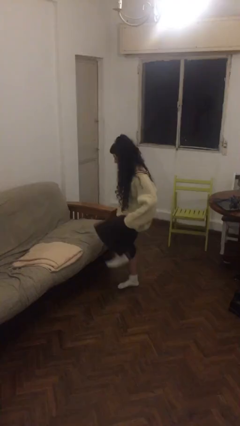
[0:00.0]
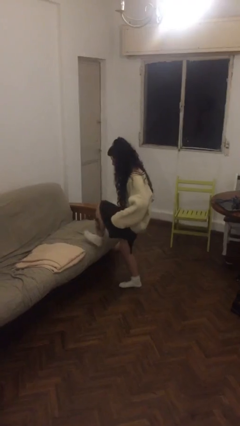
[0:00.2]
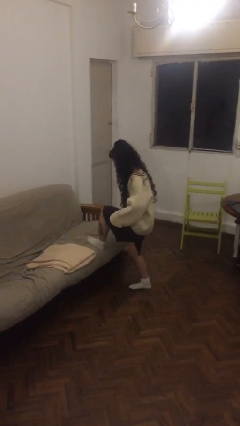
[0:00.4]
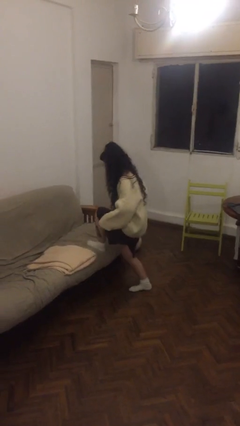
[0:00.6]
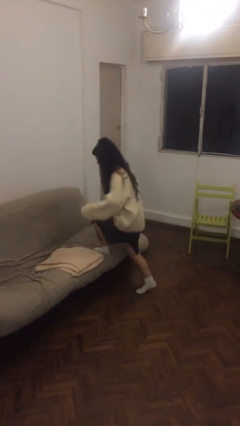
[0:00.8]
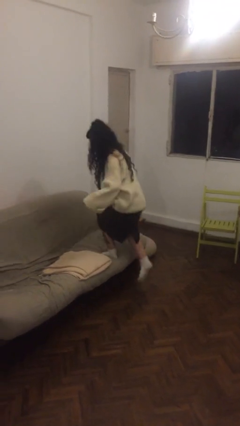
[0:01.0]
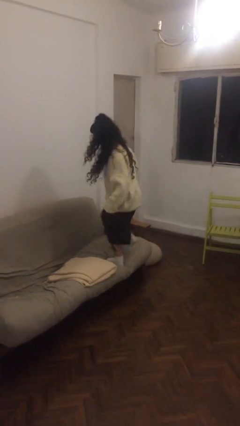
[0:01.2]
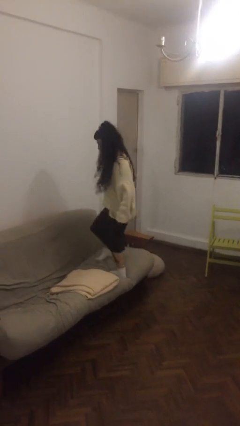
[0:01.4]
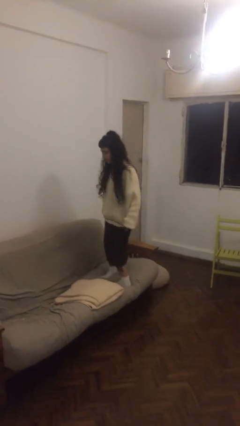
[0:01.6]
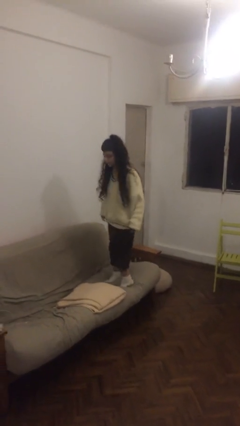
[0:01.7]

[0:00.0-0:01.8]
person climbs on couch

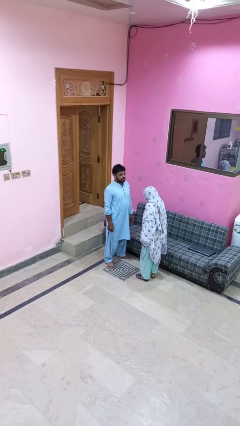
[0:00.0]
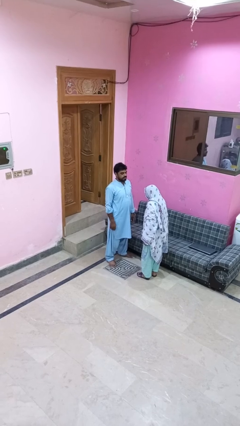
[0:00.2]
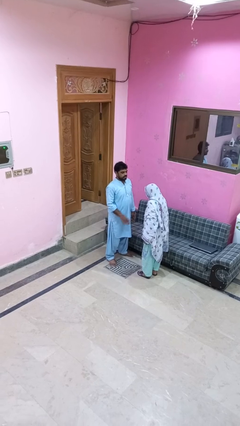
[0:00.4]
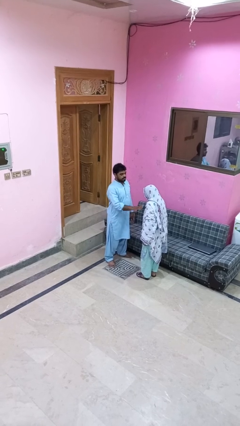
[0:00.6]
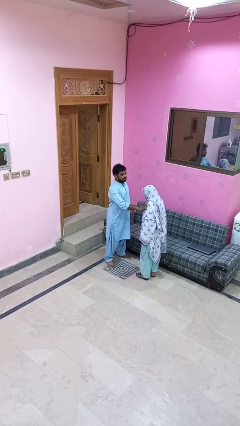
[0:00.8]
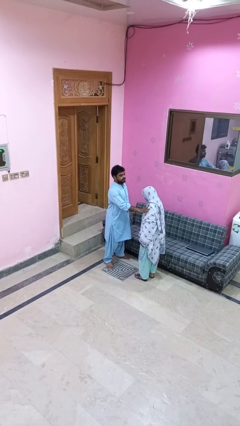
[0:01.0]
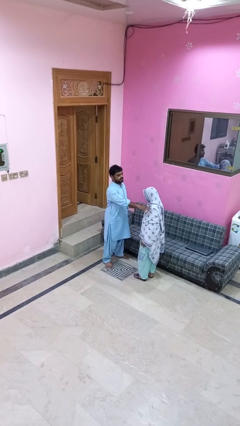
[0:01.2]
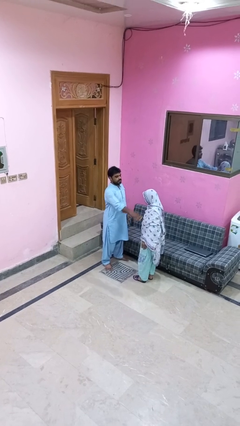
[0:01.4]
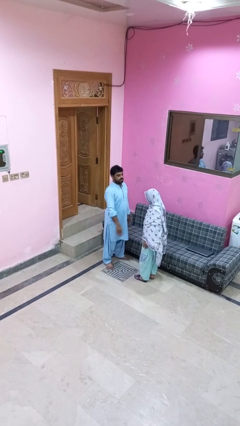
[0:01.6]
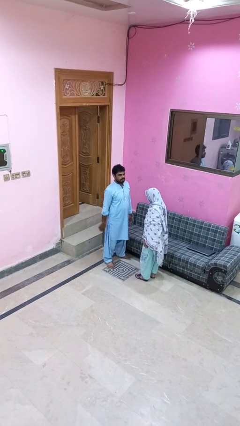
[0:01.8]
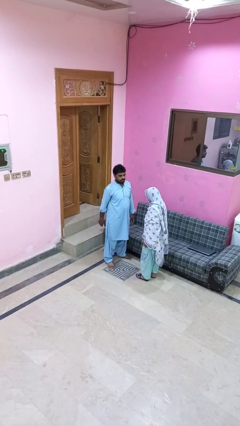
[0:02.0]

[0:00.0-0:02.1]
person shoves person

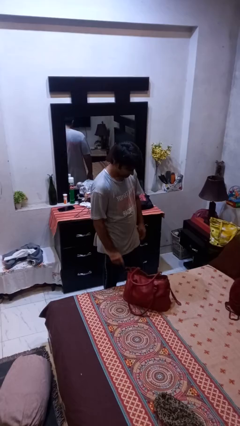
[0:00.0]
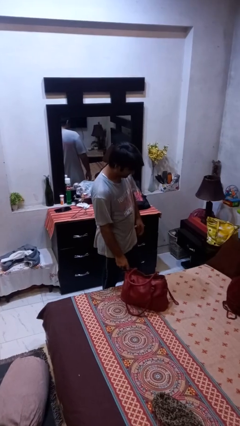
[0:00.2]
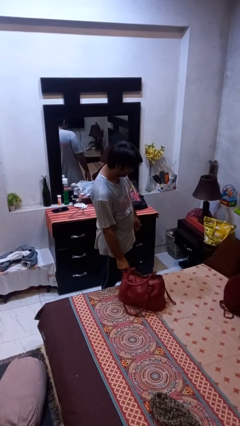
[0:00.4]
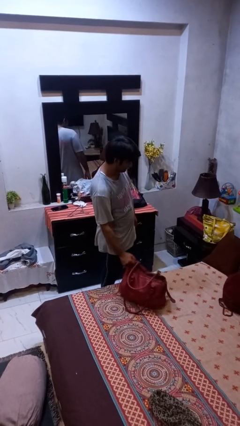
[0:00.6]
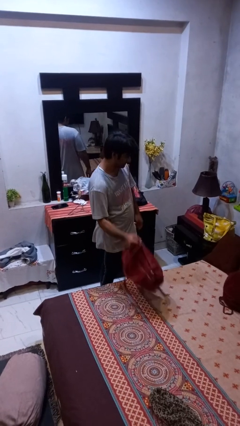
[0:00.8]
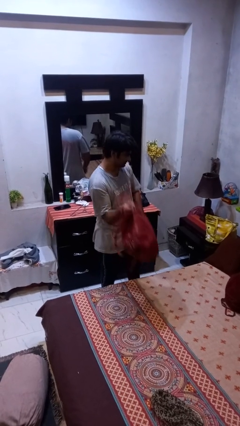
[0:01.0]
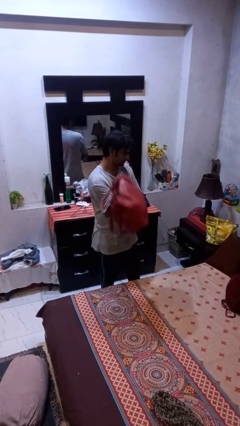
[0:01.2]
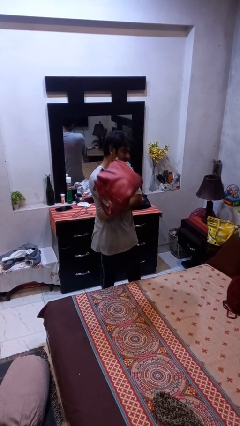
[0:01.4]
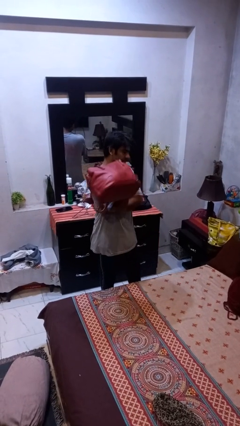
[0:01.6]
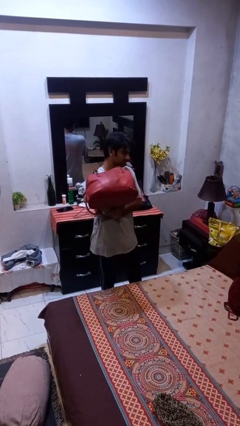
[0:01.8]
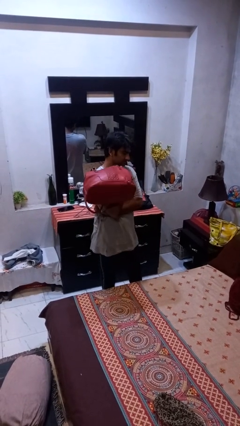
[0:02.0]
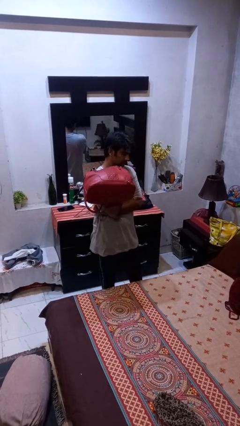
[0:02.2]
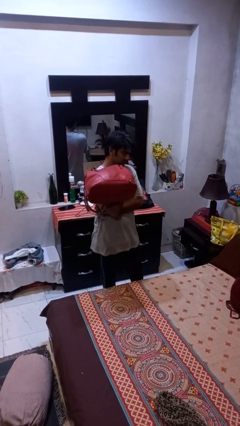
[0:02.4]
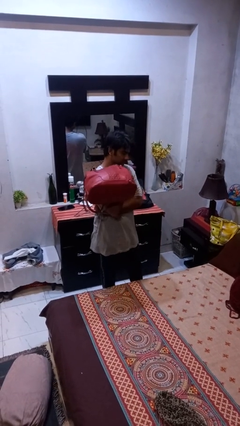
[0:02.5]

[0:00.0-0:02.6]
person picks up object from bed

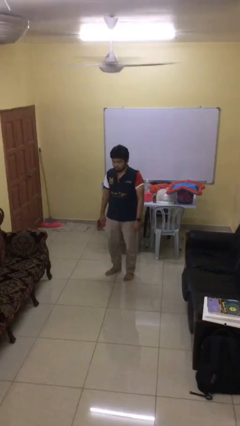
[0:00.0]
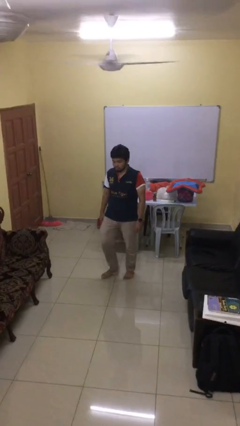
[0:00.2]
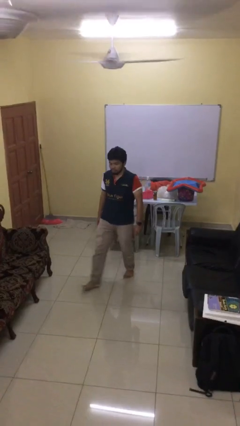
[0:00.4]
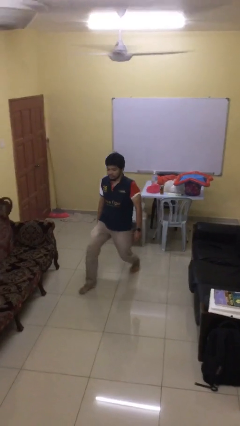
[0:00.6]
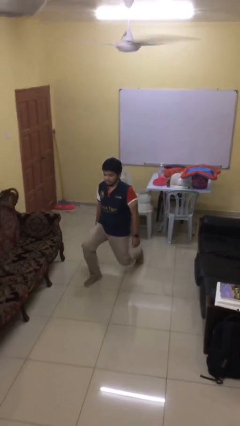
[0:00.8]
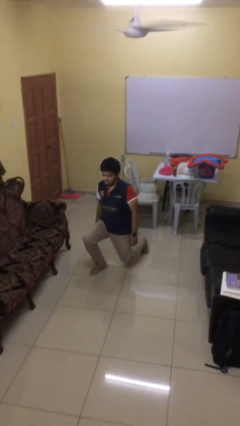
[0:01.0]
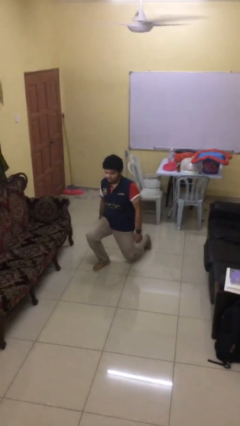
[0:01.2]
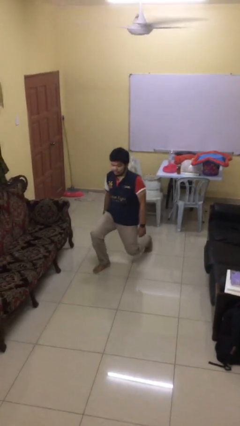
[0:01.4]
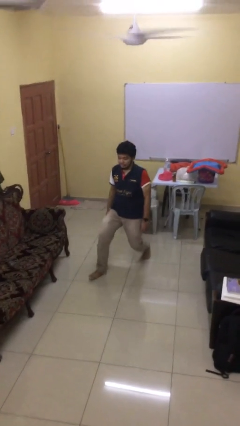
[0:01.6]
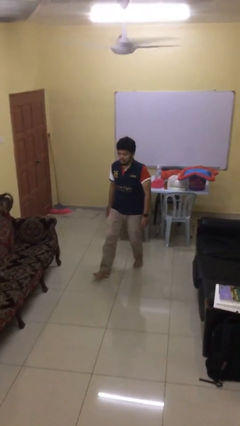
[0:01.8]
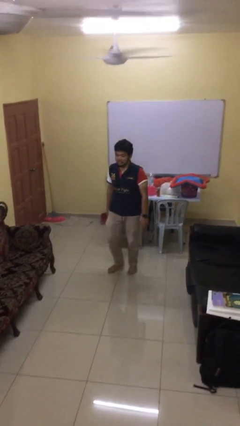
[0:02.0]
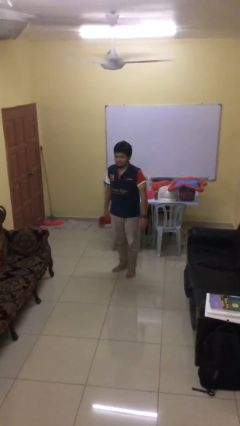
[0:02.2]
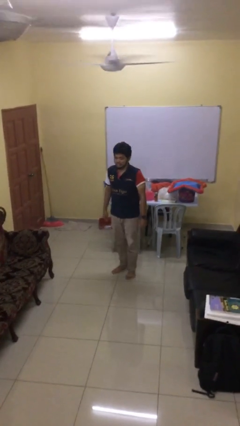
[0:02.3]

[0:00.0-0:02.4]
person exercises with lunges

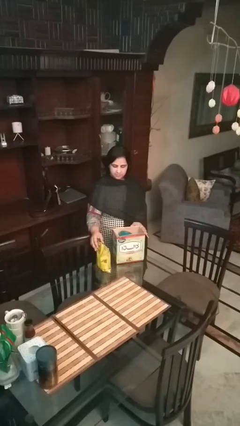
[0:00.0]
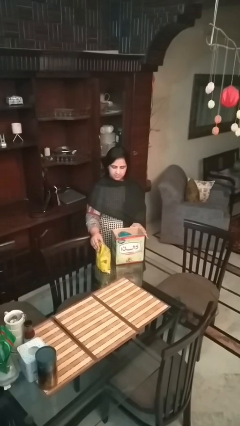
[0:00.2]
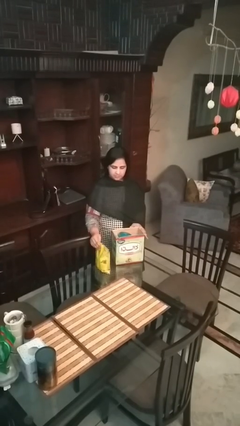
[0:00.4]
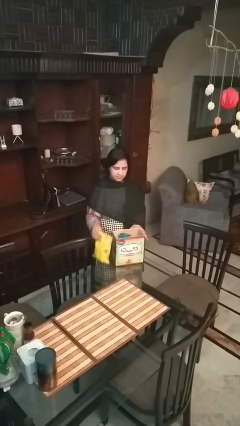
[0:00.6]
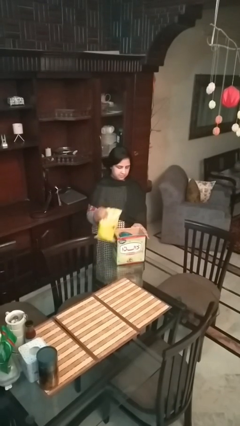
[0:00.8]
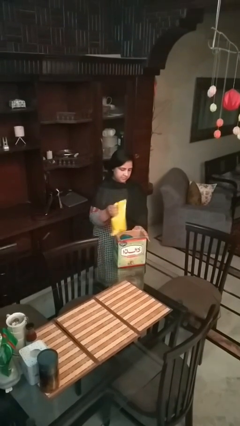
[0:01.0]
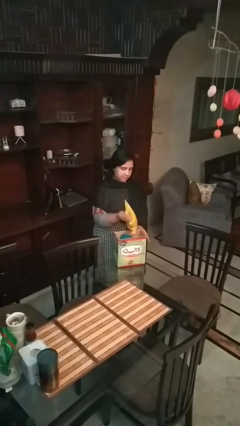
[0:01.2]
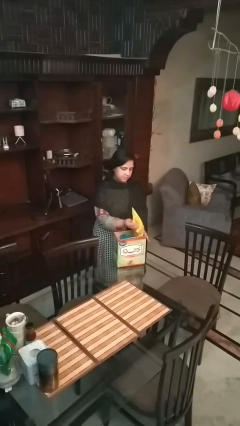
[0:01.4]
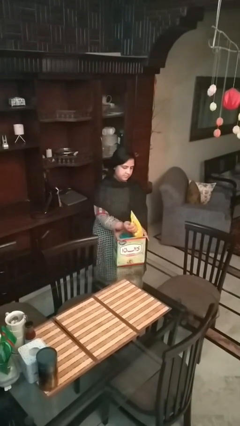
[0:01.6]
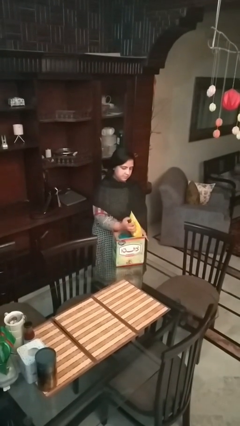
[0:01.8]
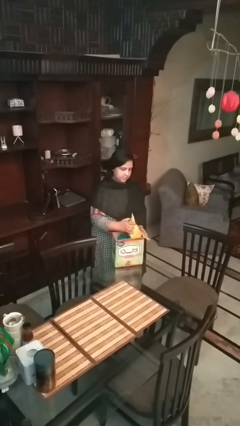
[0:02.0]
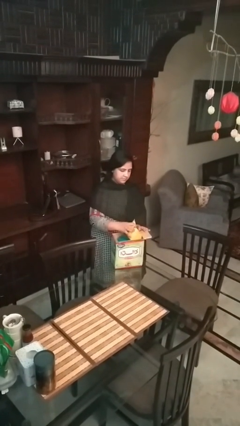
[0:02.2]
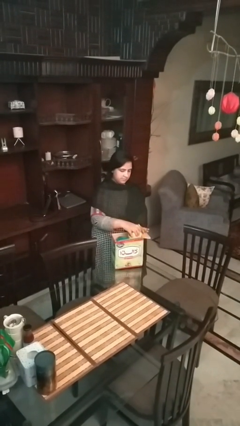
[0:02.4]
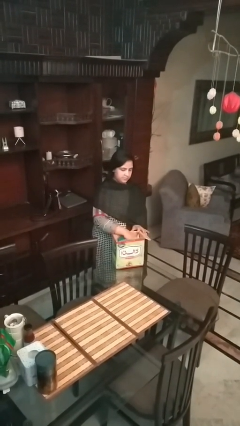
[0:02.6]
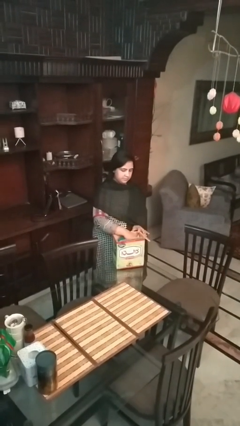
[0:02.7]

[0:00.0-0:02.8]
person puts object into box

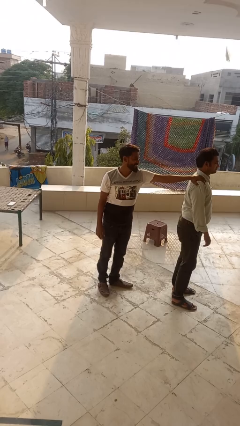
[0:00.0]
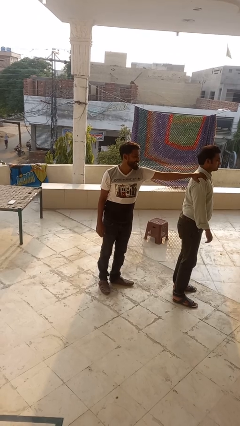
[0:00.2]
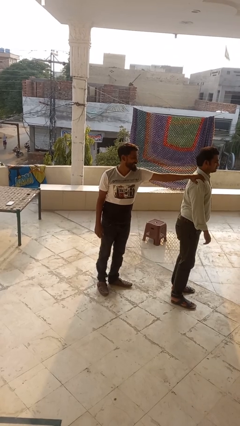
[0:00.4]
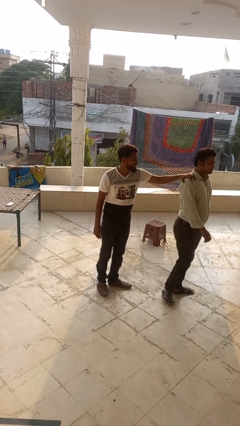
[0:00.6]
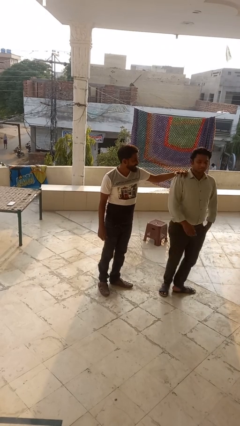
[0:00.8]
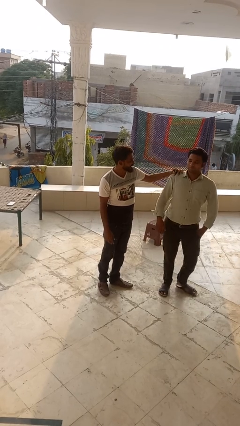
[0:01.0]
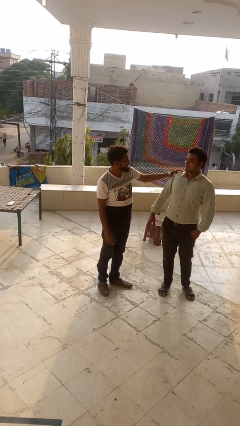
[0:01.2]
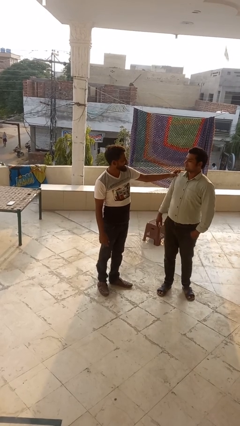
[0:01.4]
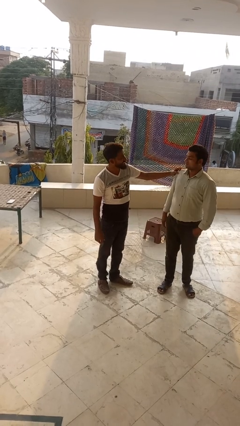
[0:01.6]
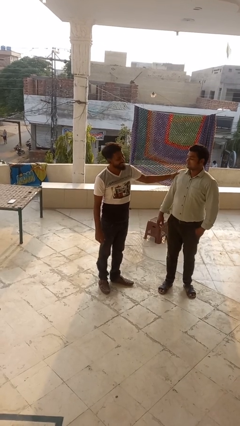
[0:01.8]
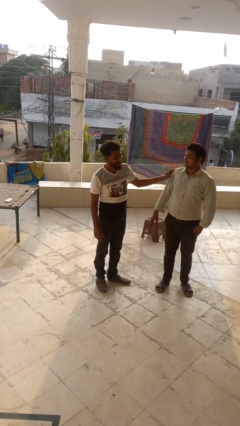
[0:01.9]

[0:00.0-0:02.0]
person spins person around

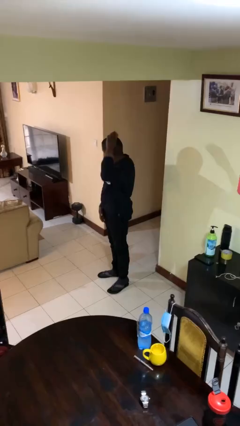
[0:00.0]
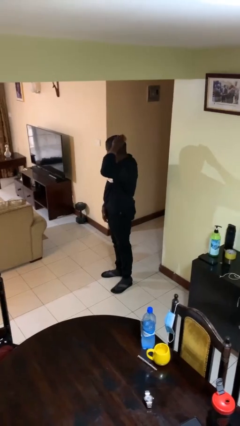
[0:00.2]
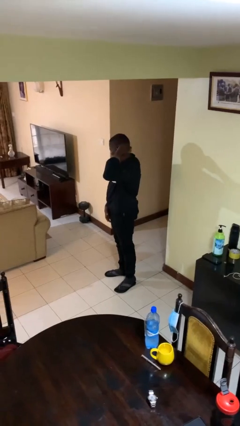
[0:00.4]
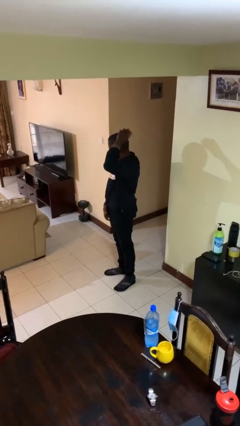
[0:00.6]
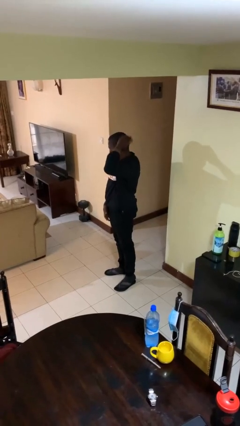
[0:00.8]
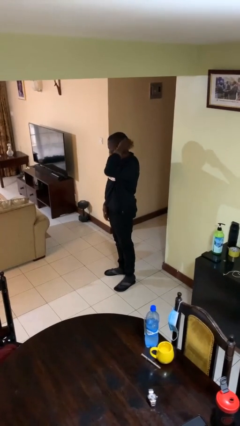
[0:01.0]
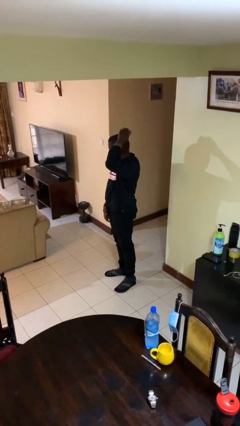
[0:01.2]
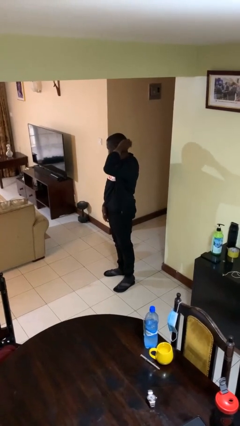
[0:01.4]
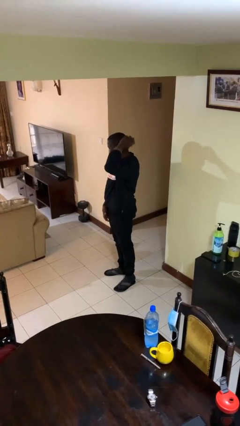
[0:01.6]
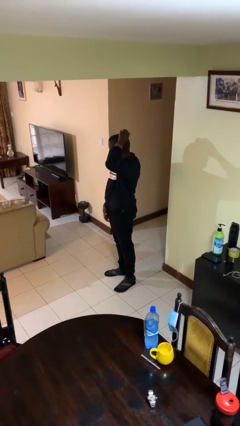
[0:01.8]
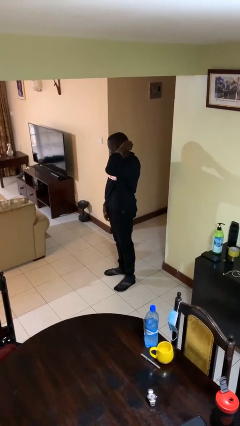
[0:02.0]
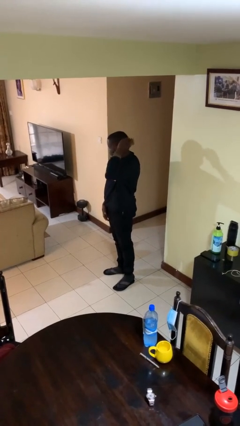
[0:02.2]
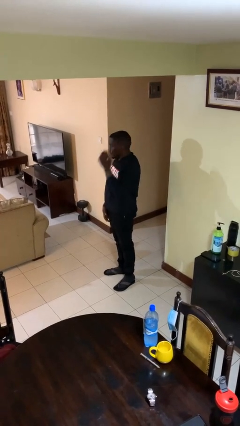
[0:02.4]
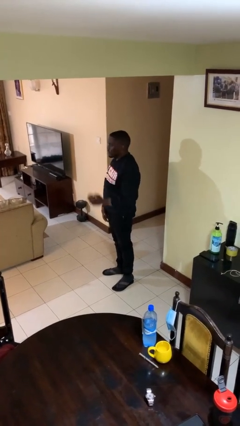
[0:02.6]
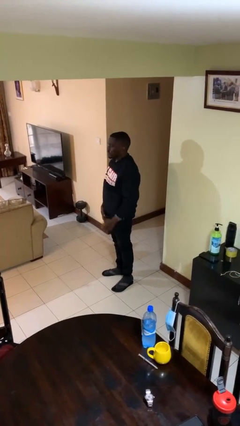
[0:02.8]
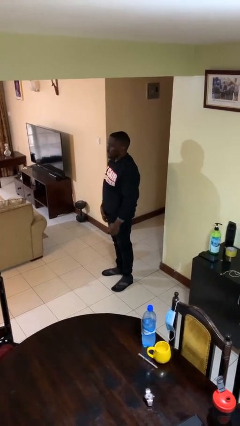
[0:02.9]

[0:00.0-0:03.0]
person brushes hair

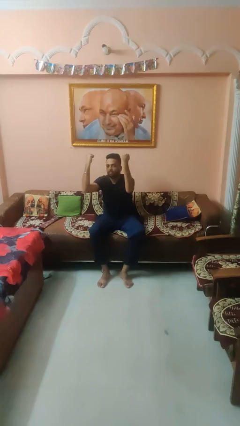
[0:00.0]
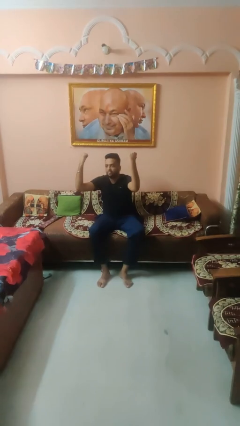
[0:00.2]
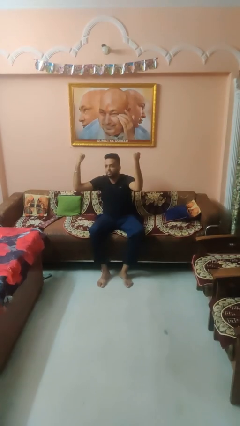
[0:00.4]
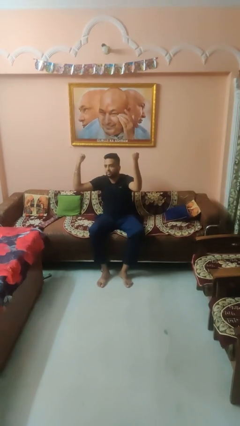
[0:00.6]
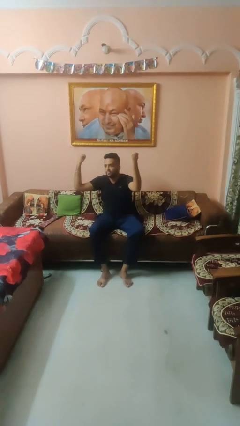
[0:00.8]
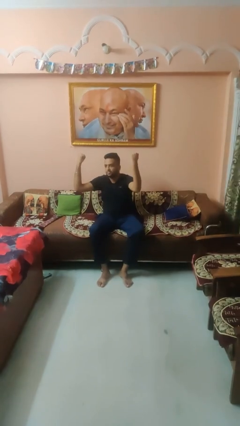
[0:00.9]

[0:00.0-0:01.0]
person gestures zoom in
